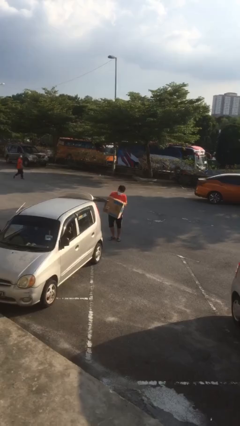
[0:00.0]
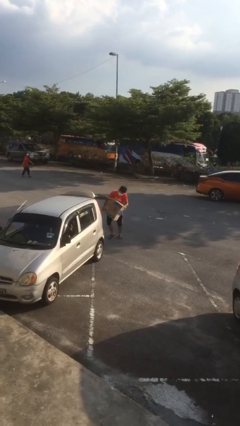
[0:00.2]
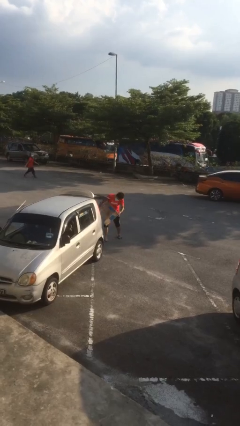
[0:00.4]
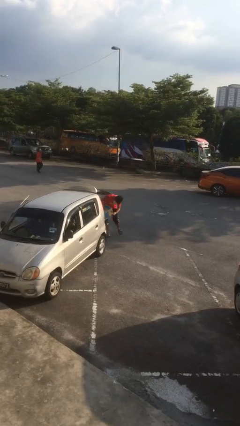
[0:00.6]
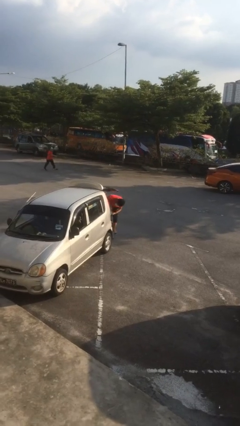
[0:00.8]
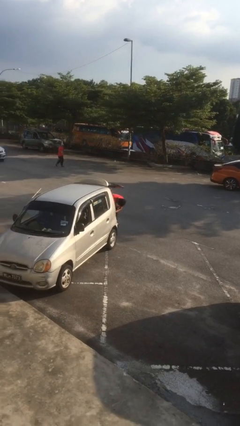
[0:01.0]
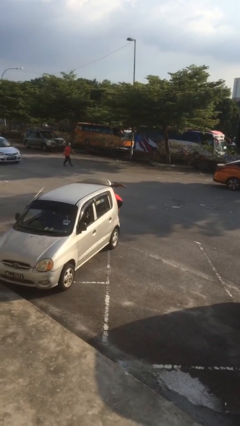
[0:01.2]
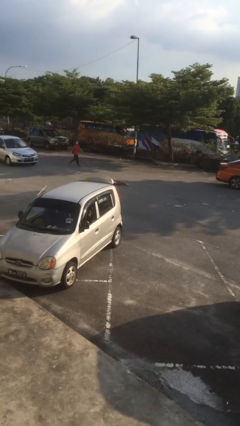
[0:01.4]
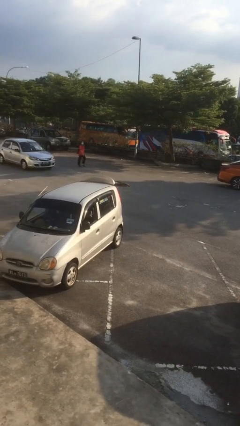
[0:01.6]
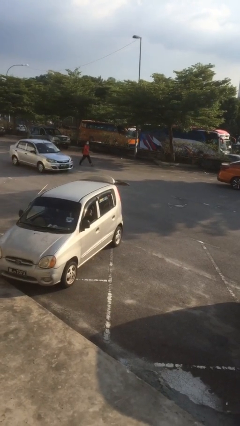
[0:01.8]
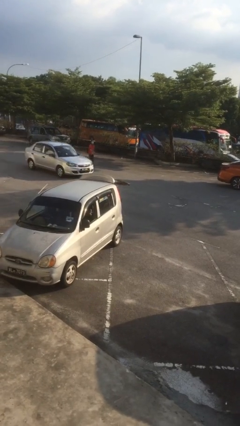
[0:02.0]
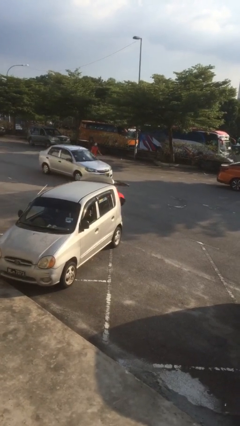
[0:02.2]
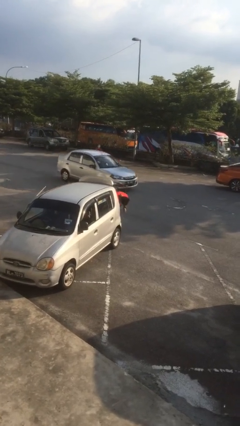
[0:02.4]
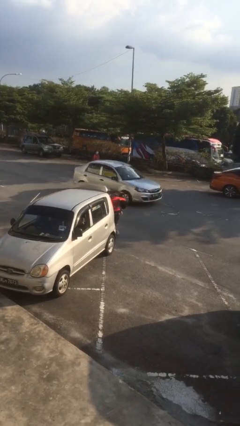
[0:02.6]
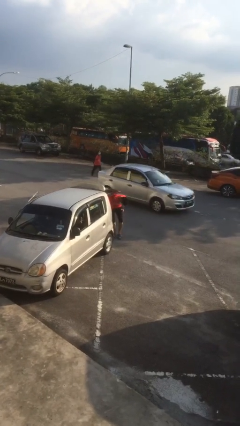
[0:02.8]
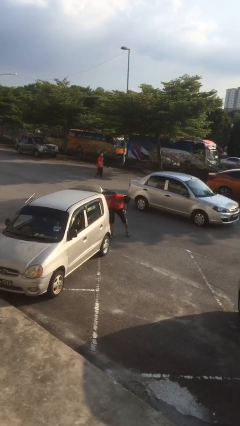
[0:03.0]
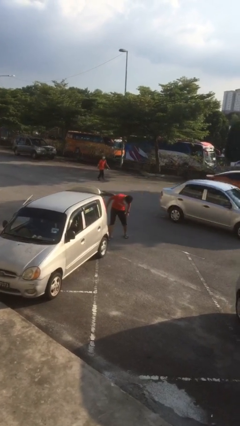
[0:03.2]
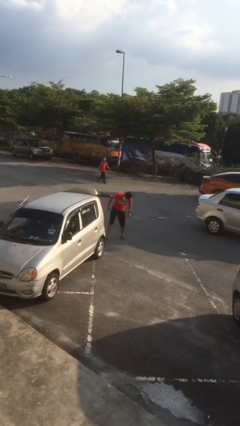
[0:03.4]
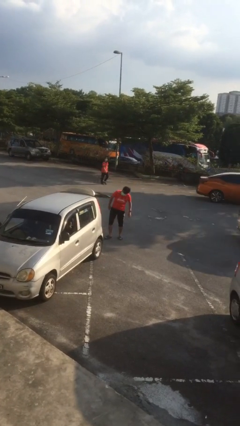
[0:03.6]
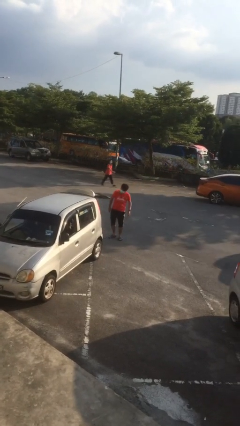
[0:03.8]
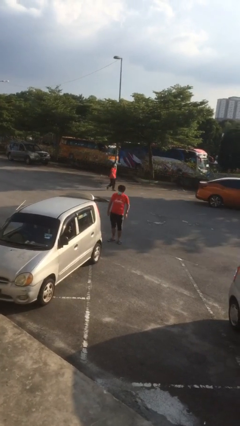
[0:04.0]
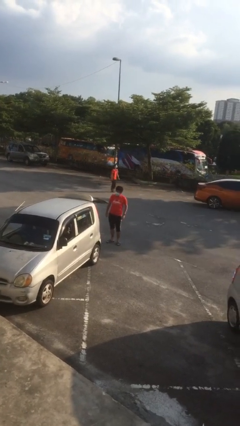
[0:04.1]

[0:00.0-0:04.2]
person loads car

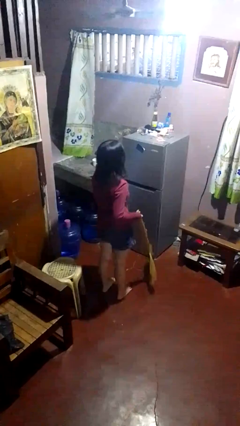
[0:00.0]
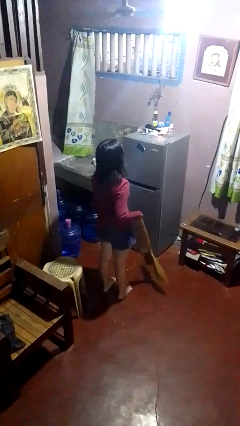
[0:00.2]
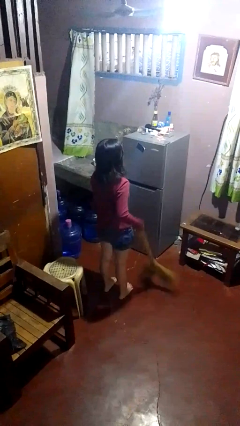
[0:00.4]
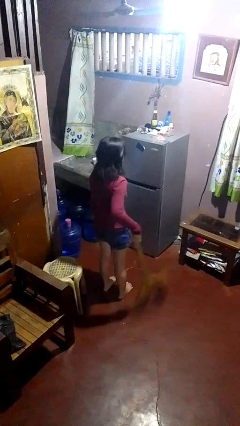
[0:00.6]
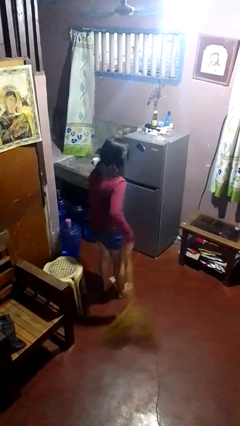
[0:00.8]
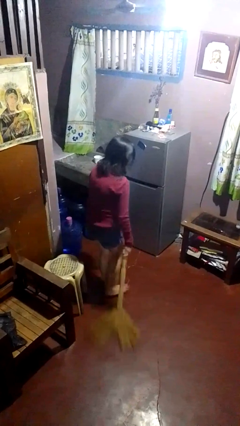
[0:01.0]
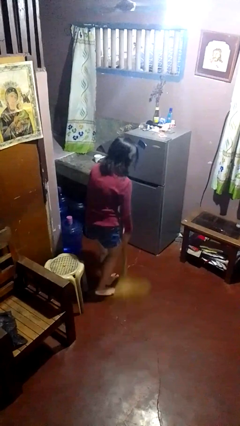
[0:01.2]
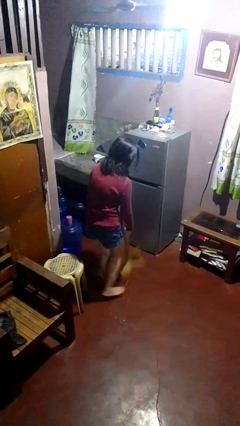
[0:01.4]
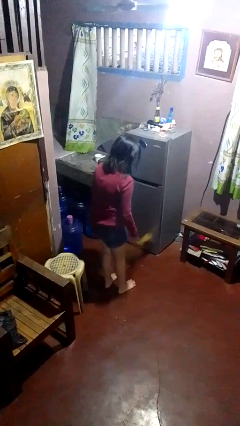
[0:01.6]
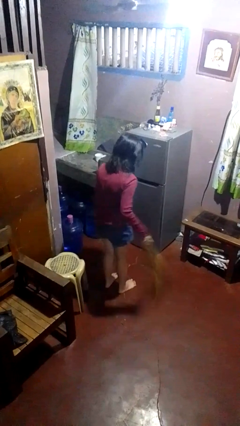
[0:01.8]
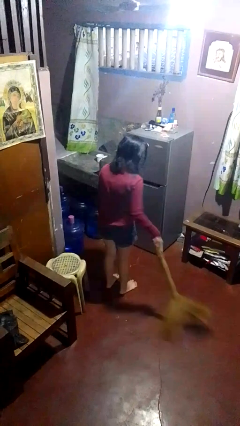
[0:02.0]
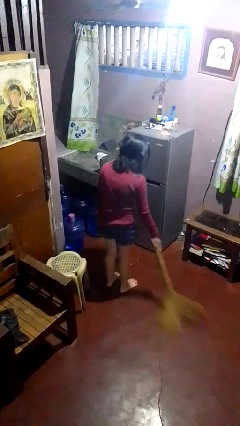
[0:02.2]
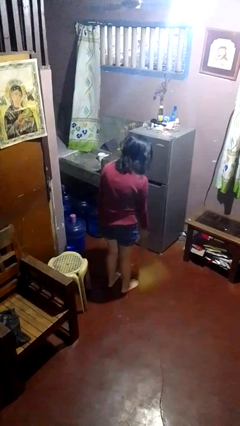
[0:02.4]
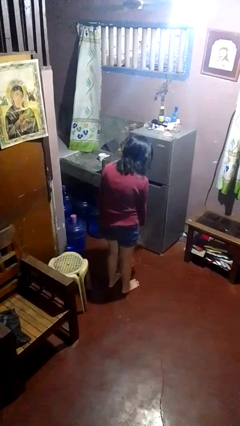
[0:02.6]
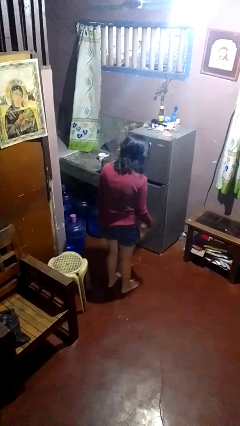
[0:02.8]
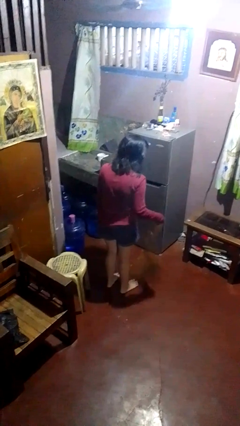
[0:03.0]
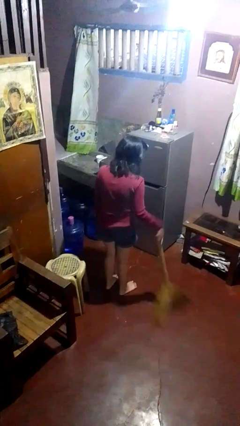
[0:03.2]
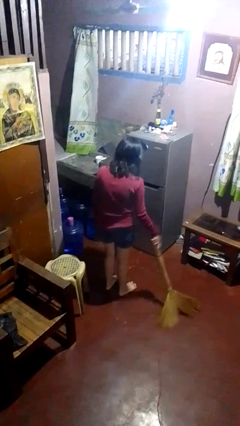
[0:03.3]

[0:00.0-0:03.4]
person sweeps floor

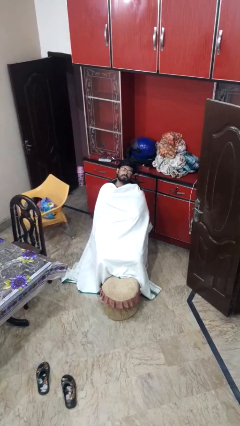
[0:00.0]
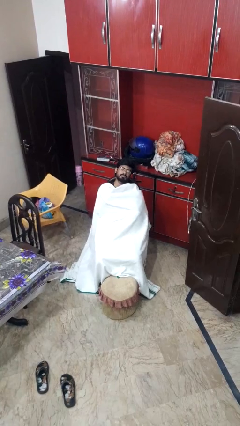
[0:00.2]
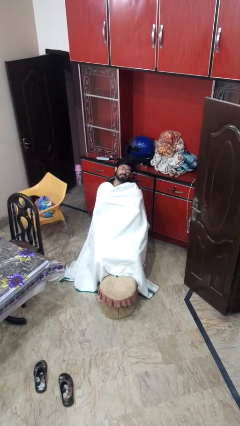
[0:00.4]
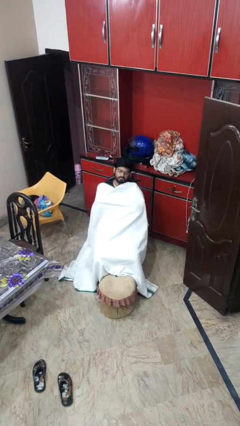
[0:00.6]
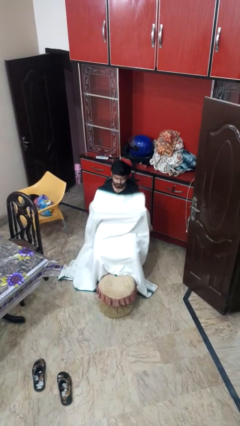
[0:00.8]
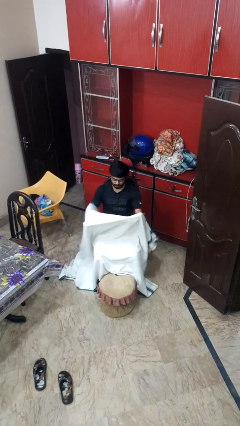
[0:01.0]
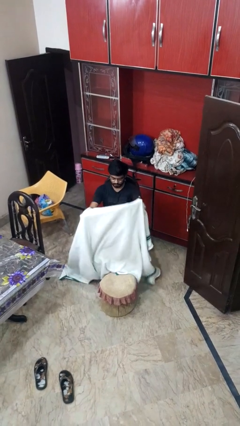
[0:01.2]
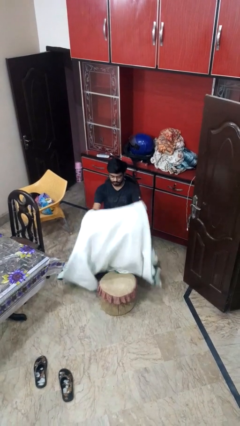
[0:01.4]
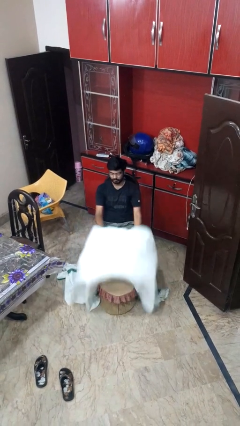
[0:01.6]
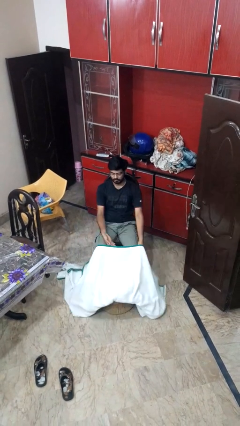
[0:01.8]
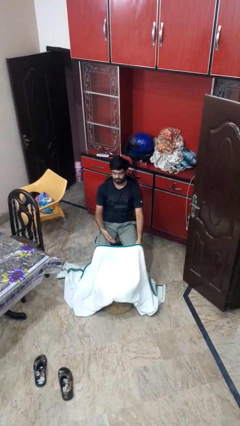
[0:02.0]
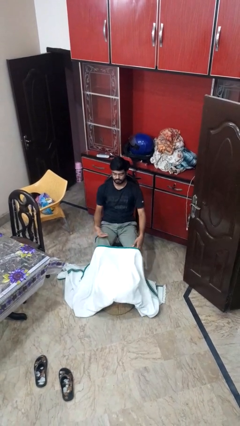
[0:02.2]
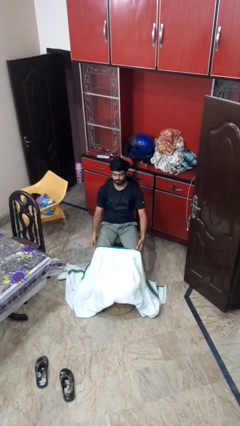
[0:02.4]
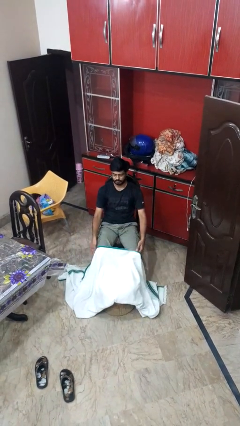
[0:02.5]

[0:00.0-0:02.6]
person uncovers with blanket

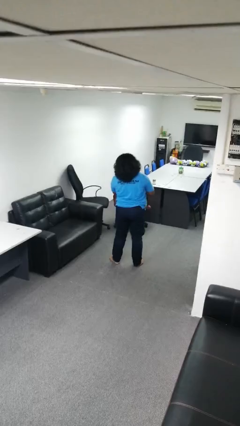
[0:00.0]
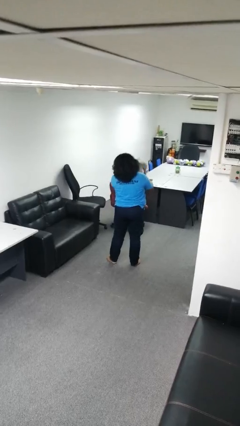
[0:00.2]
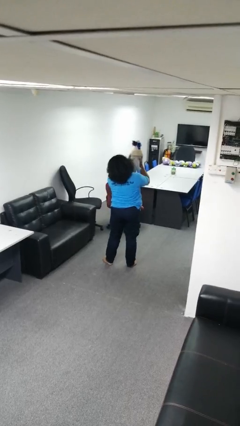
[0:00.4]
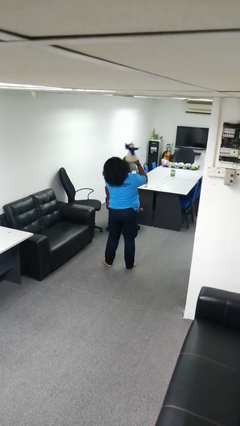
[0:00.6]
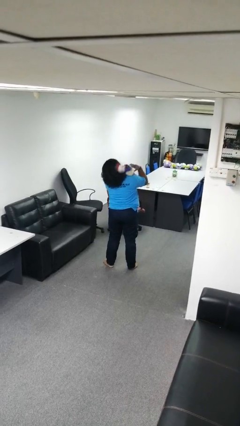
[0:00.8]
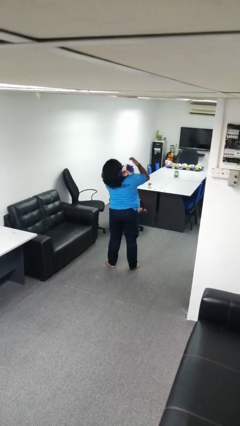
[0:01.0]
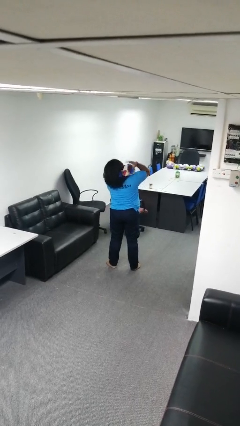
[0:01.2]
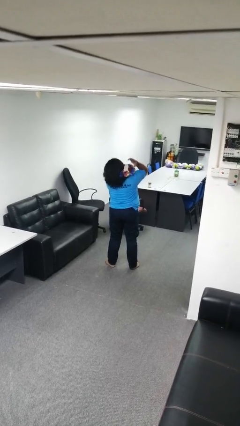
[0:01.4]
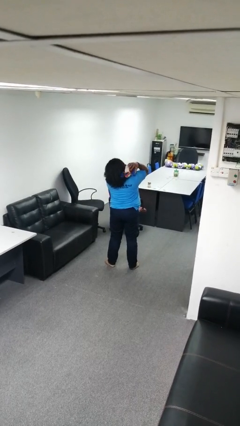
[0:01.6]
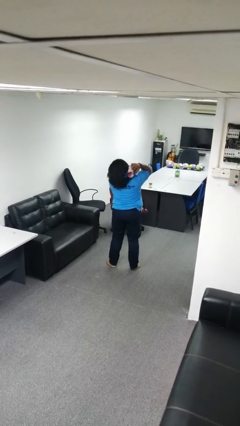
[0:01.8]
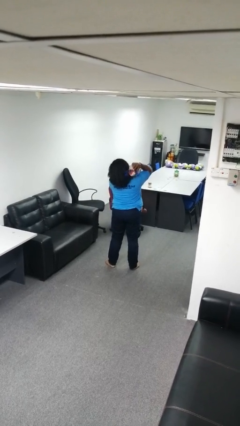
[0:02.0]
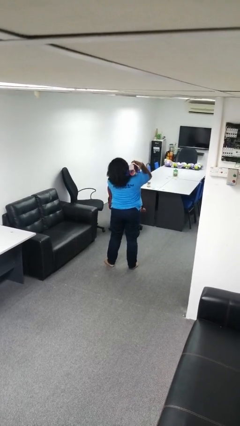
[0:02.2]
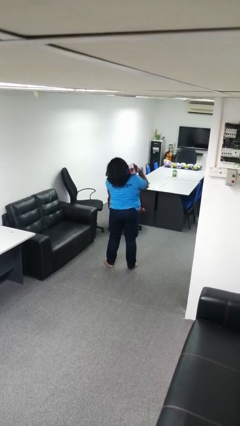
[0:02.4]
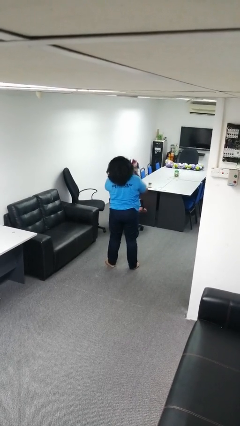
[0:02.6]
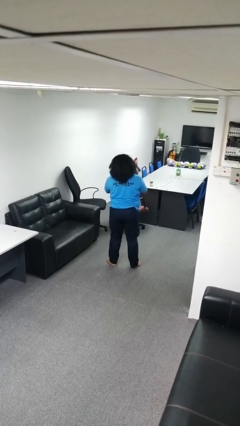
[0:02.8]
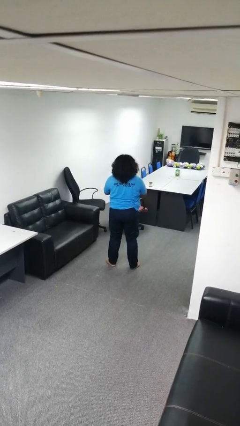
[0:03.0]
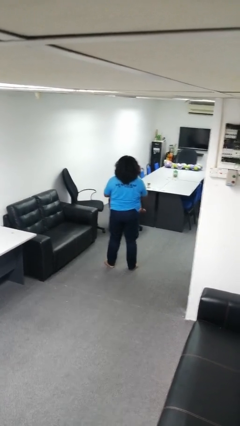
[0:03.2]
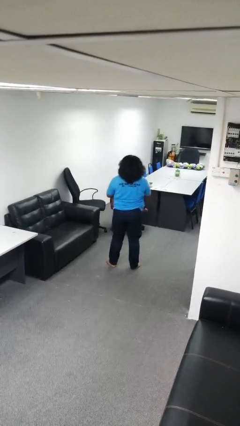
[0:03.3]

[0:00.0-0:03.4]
person hugs stuffed animal

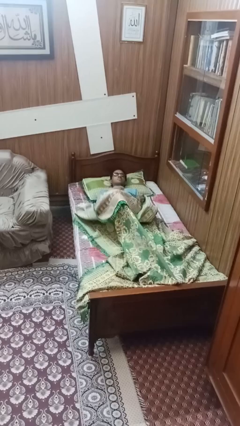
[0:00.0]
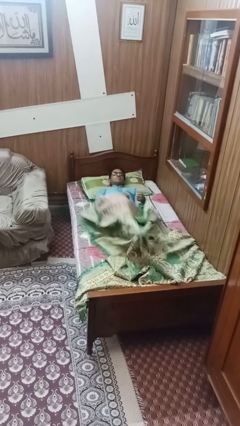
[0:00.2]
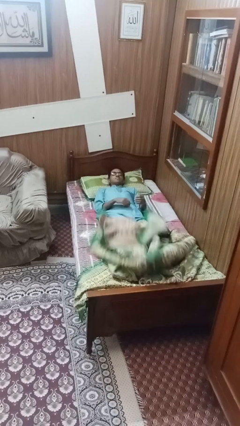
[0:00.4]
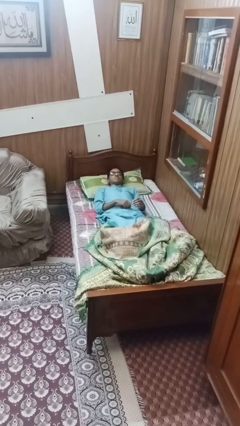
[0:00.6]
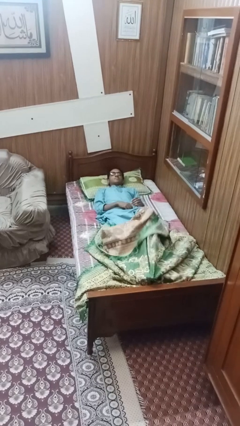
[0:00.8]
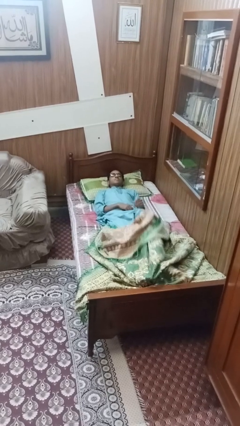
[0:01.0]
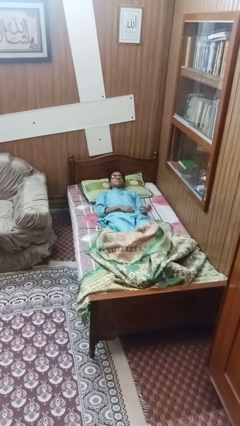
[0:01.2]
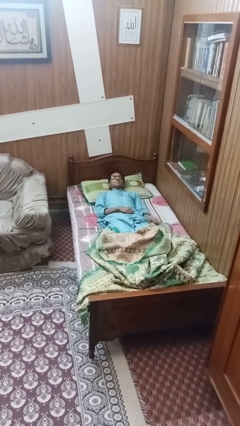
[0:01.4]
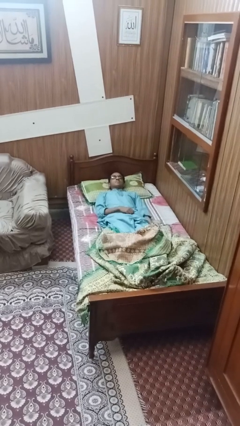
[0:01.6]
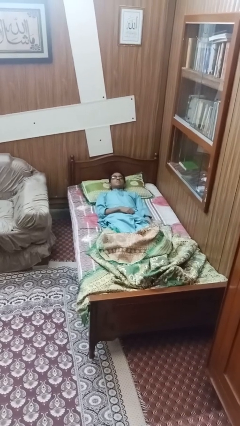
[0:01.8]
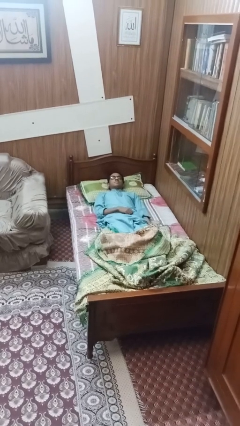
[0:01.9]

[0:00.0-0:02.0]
person uncovers with bedsheets

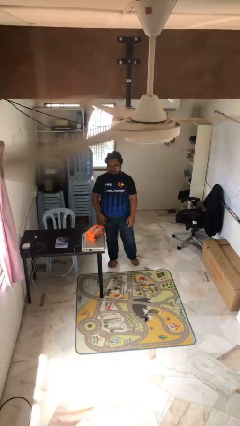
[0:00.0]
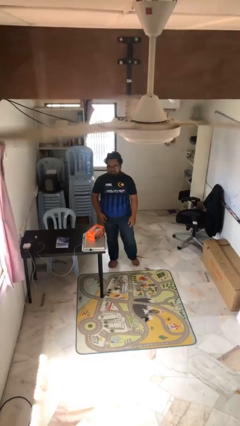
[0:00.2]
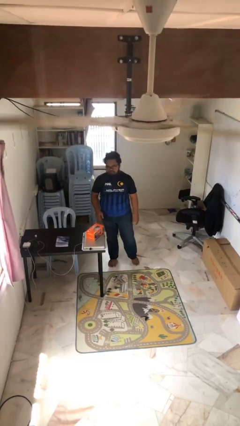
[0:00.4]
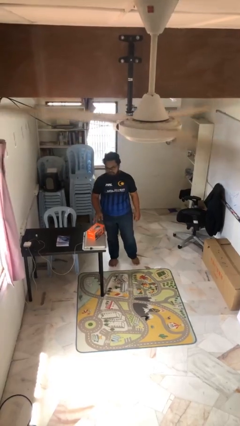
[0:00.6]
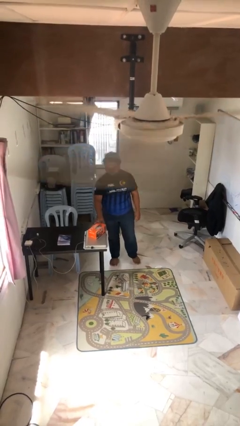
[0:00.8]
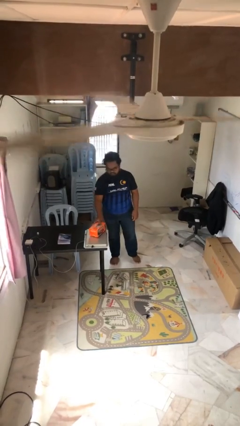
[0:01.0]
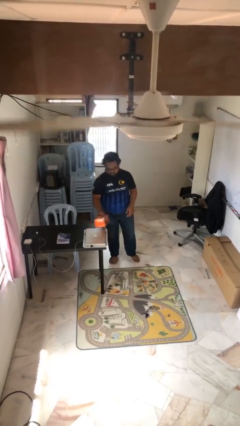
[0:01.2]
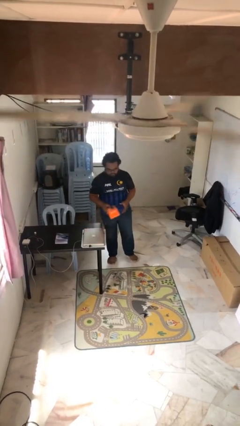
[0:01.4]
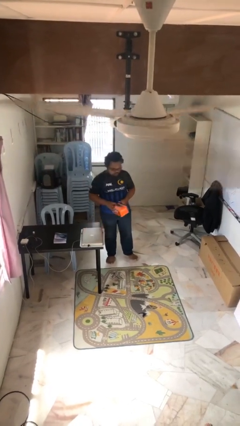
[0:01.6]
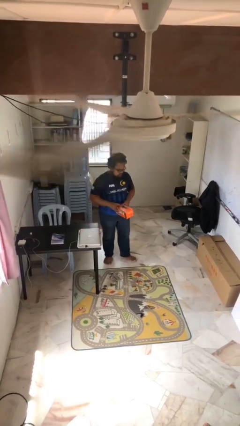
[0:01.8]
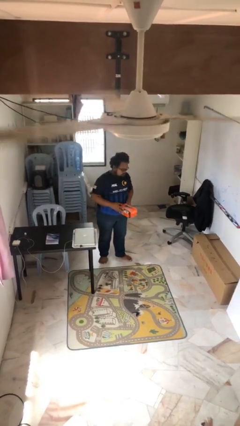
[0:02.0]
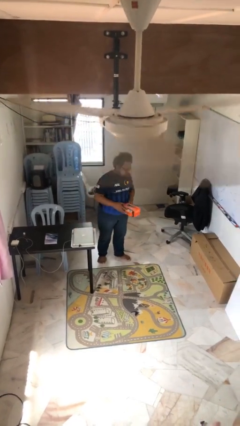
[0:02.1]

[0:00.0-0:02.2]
person picks up object from table
